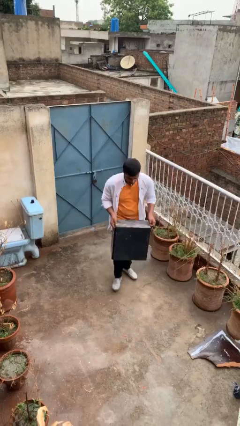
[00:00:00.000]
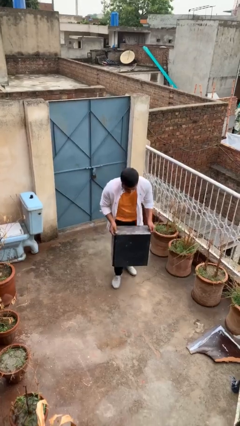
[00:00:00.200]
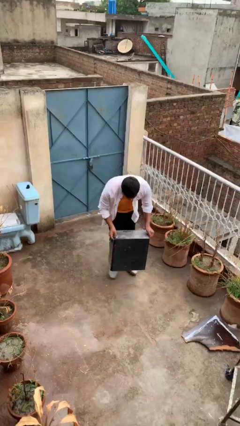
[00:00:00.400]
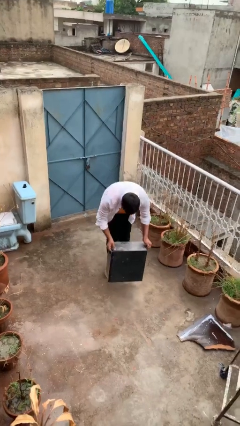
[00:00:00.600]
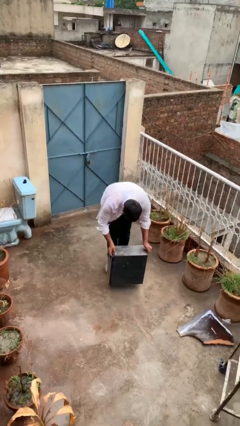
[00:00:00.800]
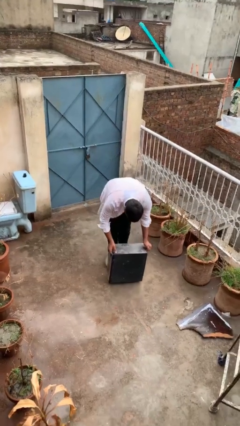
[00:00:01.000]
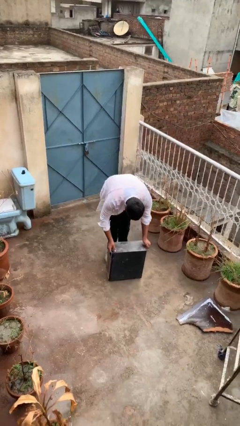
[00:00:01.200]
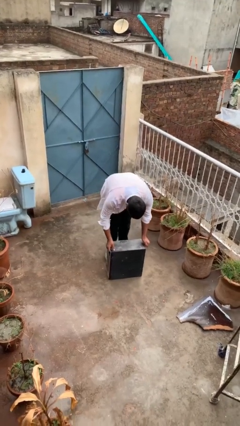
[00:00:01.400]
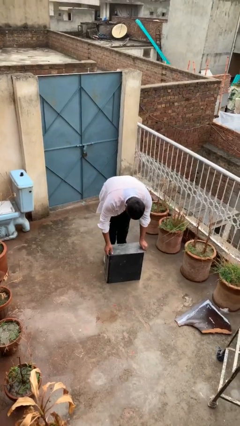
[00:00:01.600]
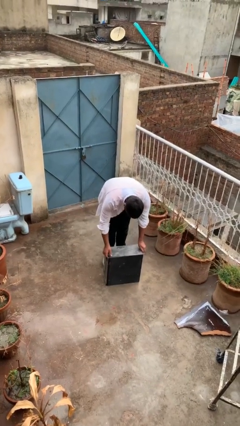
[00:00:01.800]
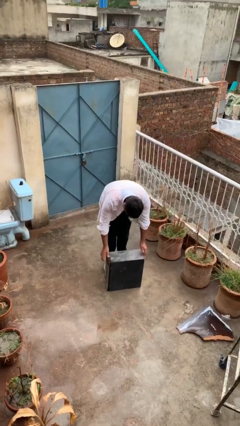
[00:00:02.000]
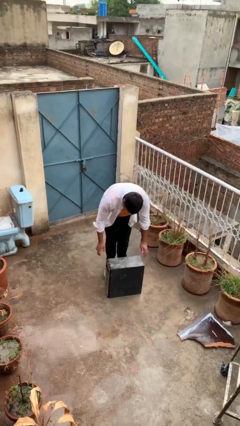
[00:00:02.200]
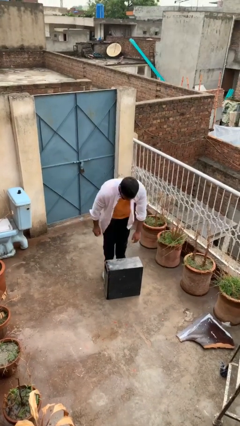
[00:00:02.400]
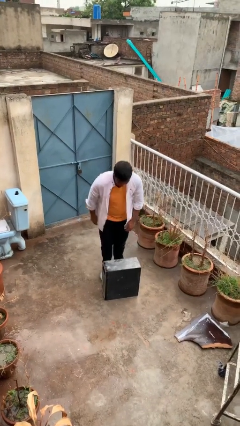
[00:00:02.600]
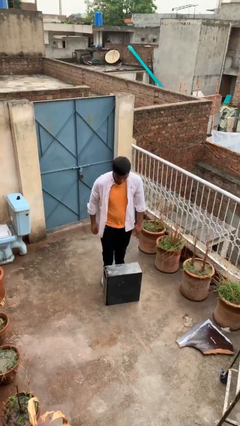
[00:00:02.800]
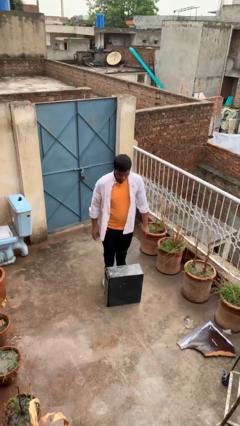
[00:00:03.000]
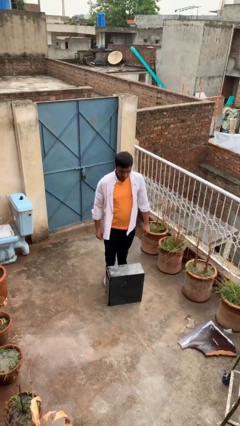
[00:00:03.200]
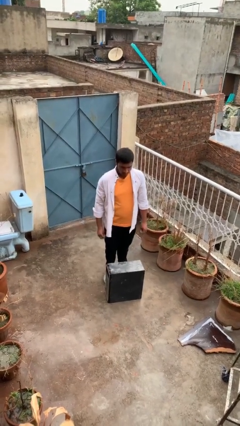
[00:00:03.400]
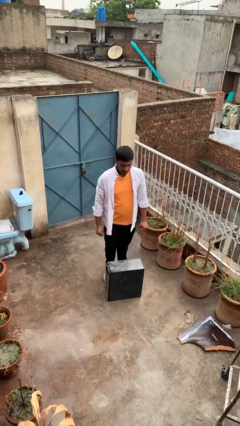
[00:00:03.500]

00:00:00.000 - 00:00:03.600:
person puts down object on floor

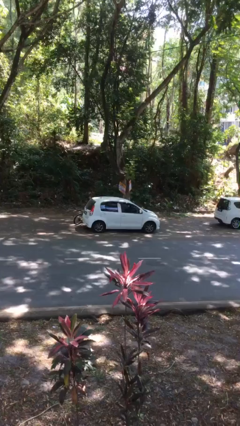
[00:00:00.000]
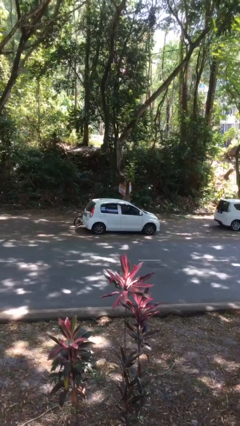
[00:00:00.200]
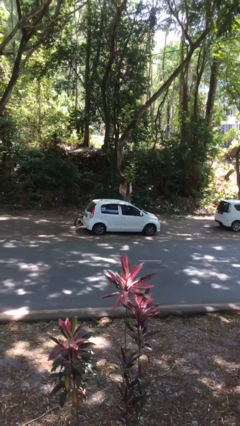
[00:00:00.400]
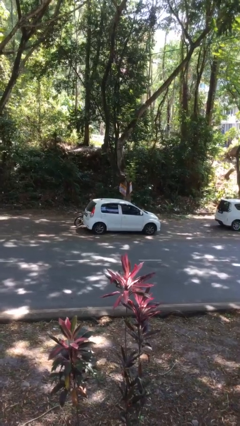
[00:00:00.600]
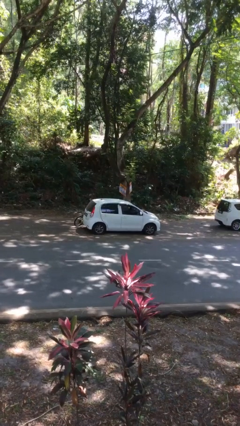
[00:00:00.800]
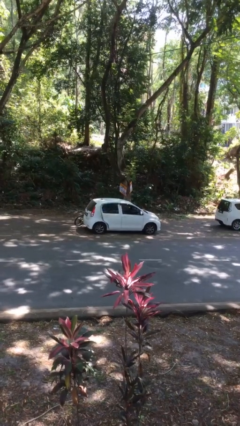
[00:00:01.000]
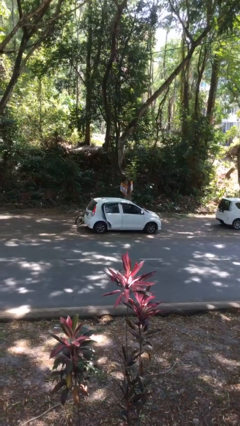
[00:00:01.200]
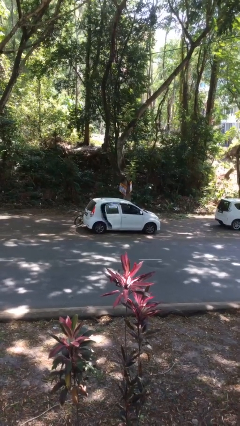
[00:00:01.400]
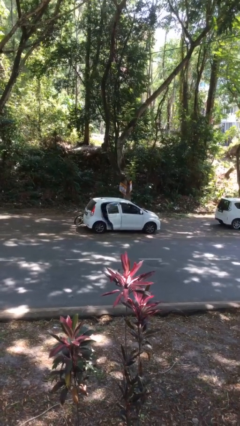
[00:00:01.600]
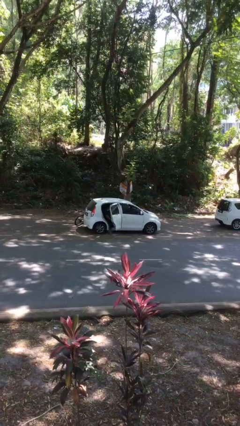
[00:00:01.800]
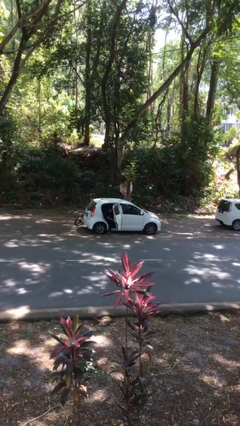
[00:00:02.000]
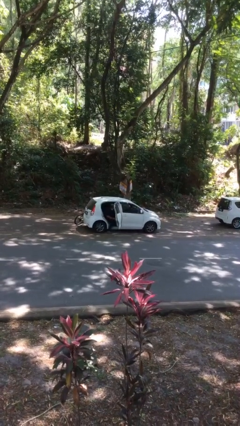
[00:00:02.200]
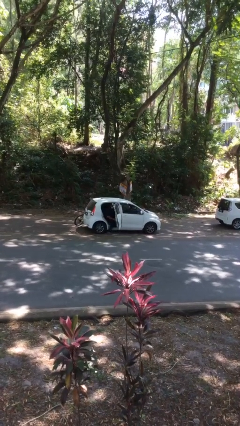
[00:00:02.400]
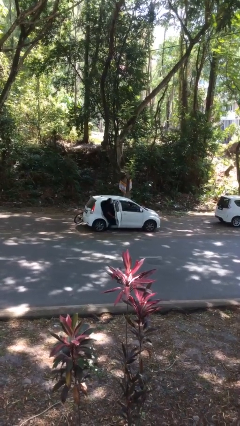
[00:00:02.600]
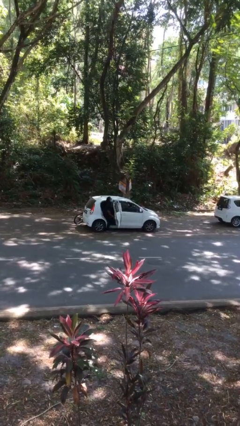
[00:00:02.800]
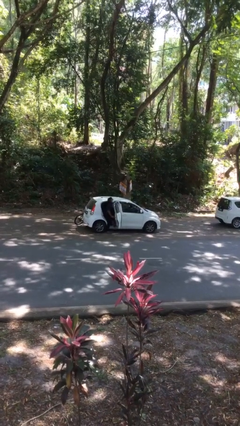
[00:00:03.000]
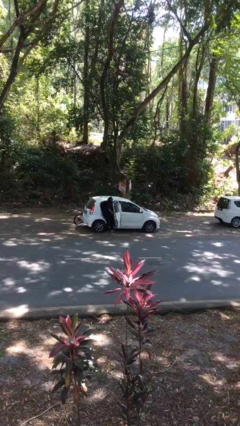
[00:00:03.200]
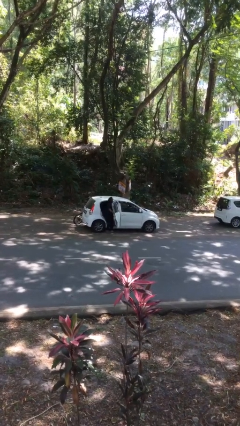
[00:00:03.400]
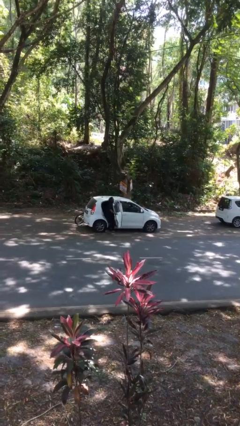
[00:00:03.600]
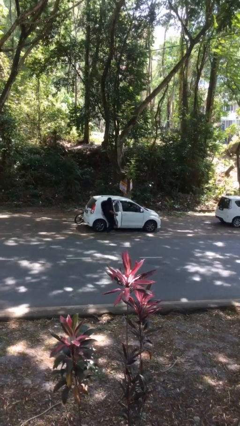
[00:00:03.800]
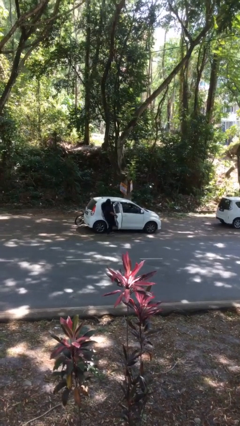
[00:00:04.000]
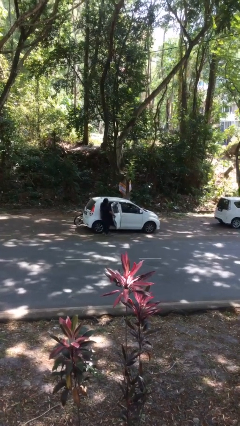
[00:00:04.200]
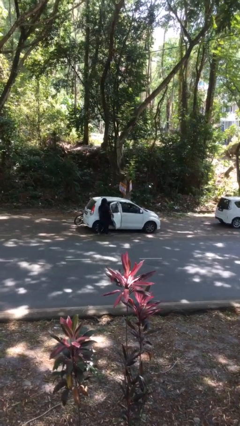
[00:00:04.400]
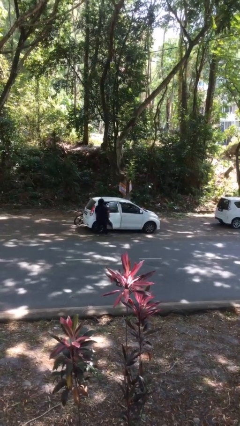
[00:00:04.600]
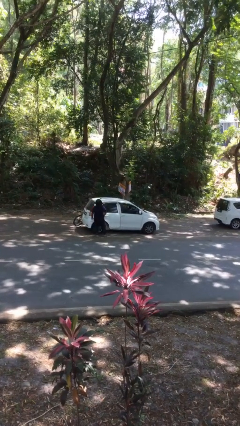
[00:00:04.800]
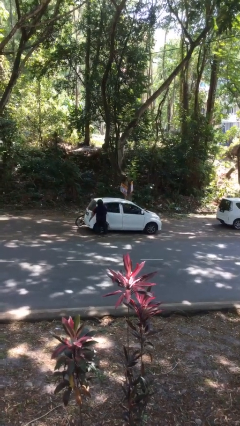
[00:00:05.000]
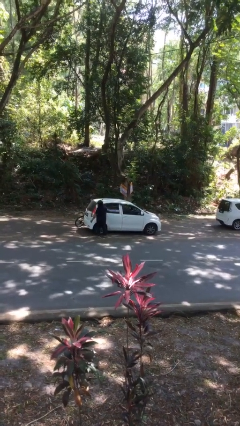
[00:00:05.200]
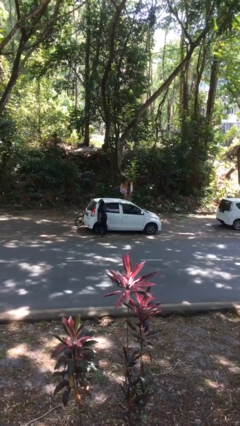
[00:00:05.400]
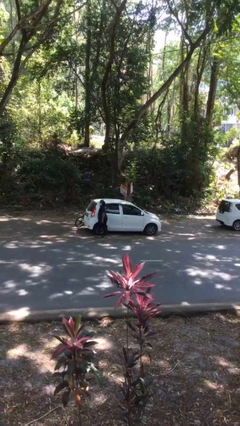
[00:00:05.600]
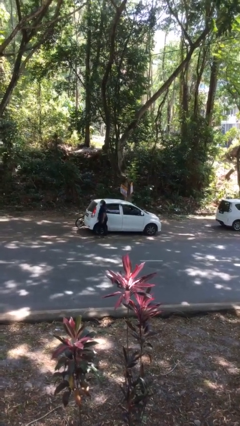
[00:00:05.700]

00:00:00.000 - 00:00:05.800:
car drops off person

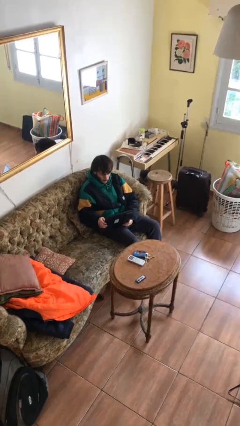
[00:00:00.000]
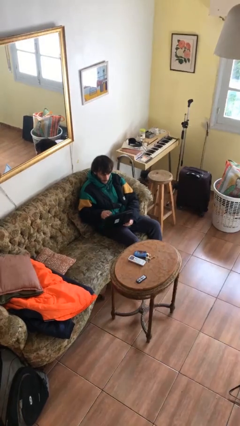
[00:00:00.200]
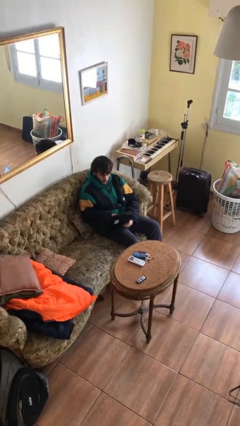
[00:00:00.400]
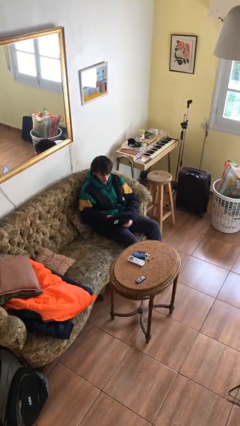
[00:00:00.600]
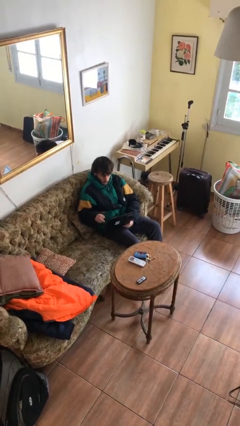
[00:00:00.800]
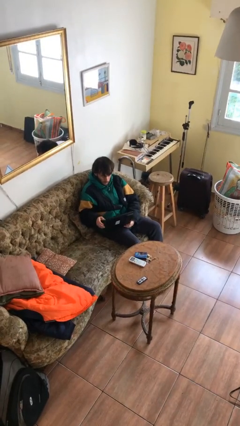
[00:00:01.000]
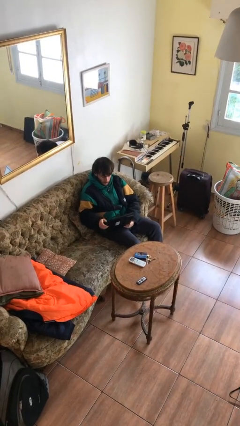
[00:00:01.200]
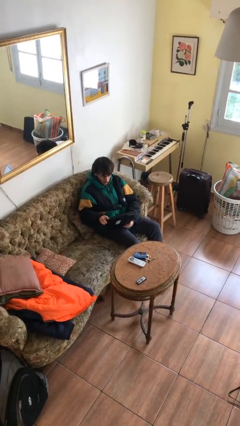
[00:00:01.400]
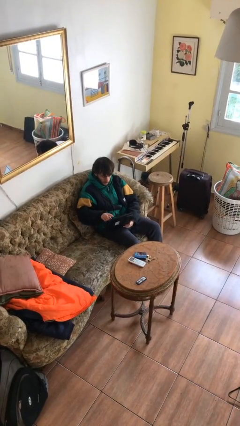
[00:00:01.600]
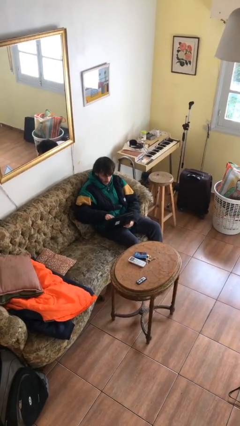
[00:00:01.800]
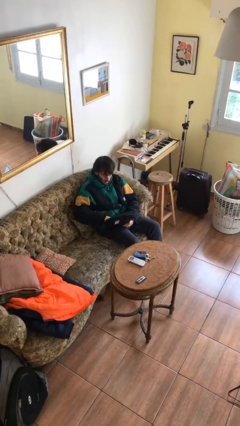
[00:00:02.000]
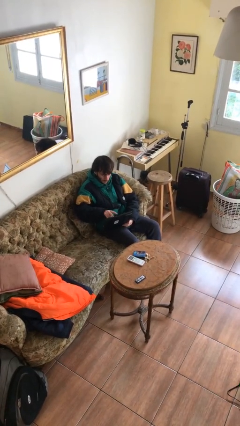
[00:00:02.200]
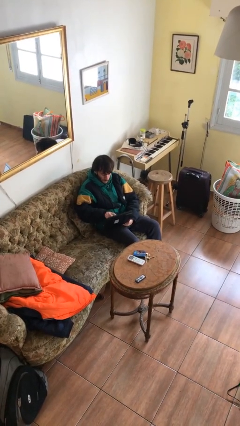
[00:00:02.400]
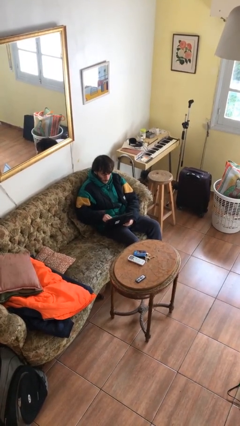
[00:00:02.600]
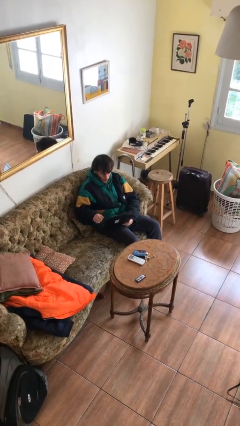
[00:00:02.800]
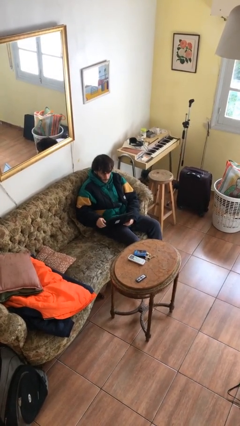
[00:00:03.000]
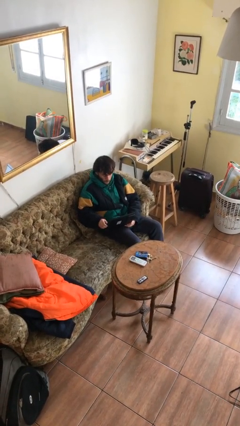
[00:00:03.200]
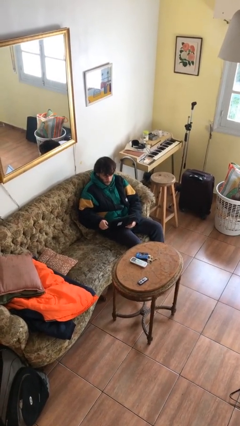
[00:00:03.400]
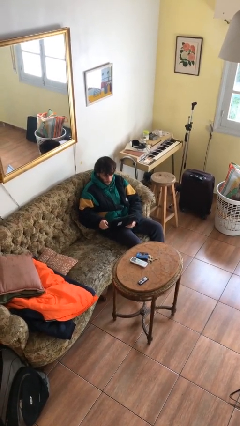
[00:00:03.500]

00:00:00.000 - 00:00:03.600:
person interacts with tablet

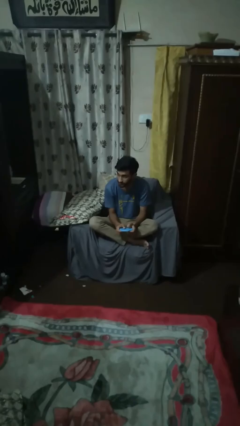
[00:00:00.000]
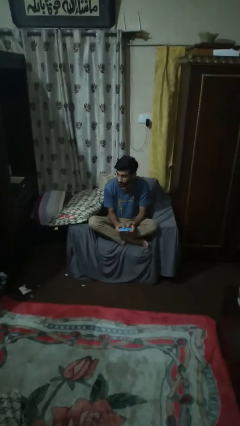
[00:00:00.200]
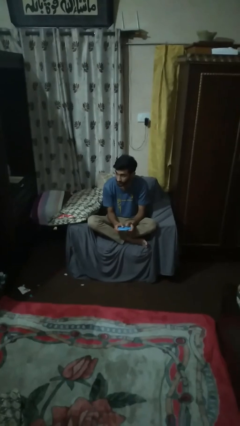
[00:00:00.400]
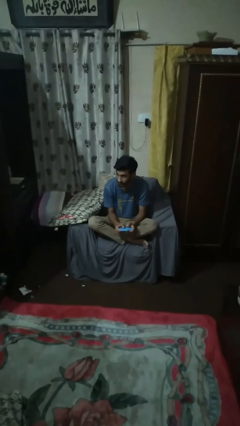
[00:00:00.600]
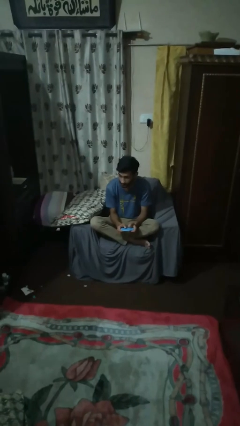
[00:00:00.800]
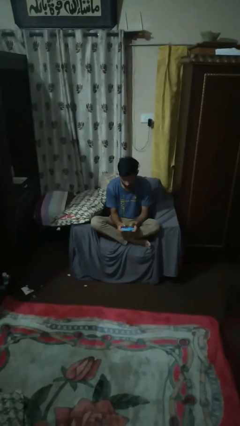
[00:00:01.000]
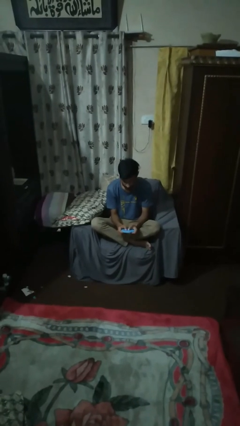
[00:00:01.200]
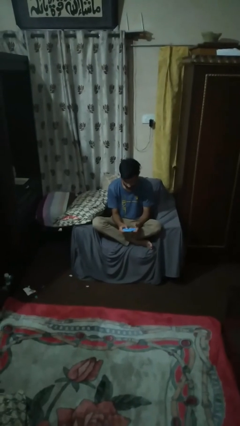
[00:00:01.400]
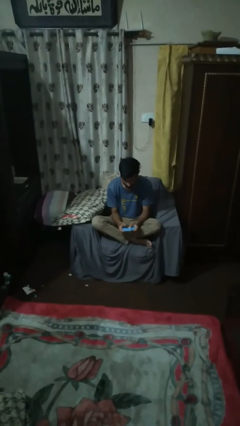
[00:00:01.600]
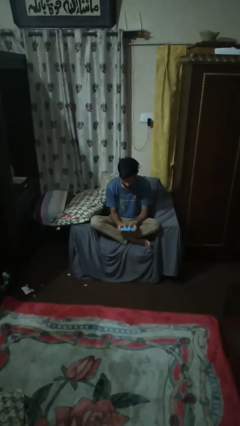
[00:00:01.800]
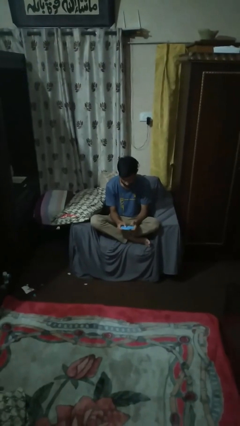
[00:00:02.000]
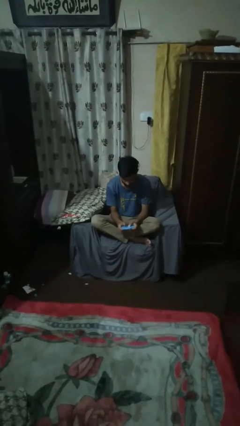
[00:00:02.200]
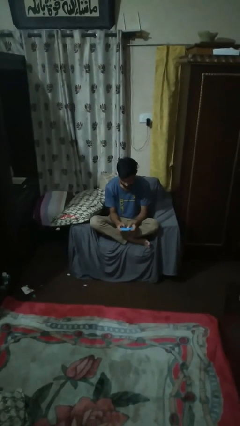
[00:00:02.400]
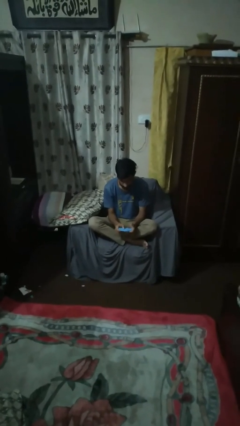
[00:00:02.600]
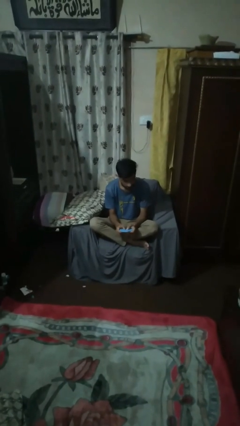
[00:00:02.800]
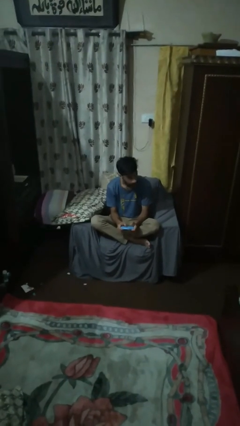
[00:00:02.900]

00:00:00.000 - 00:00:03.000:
person interacts with handheld game

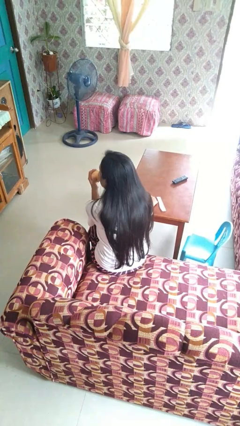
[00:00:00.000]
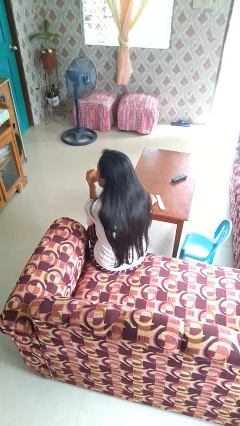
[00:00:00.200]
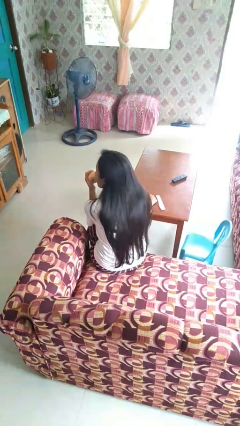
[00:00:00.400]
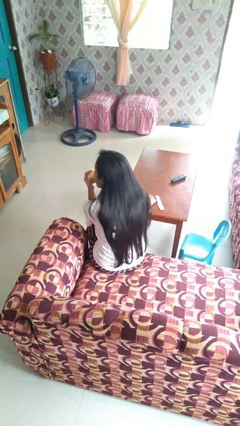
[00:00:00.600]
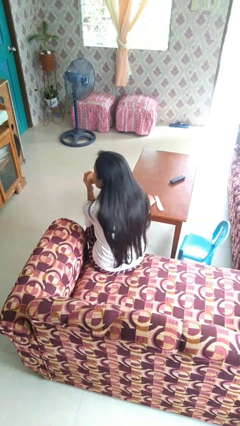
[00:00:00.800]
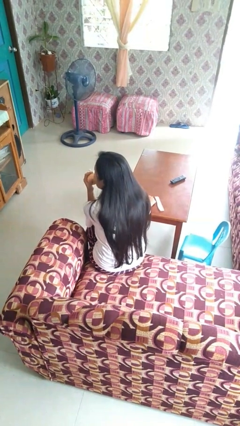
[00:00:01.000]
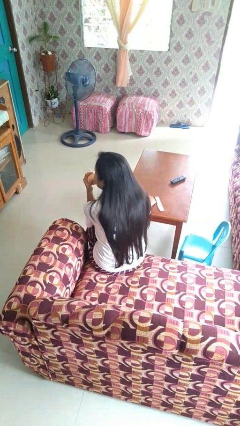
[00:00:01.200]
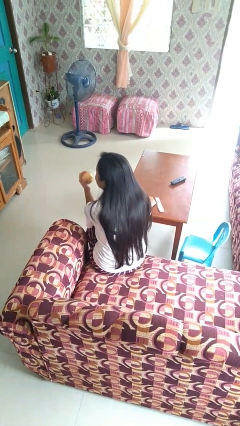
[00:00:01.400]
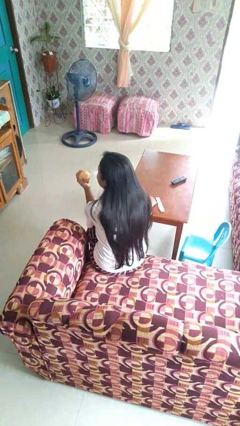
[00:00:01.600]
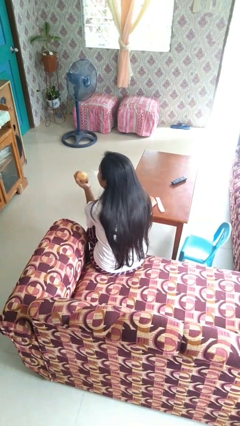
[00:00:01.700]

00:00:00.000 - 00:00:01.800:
person eats apple
